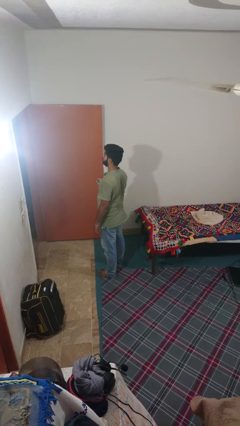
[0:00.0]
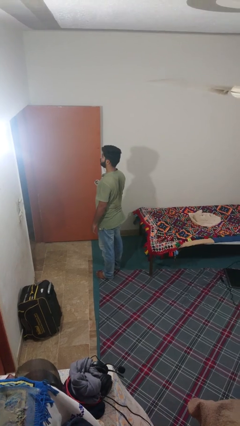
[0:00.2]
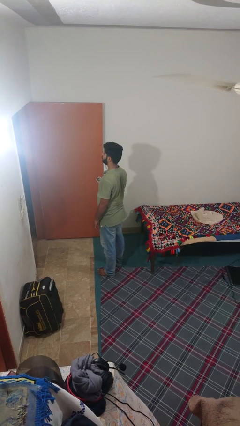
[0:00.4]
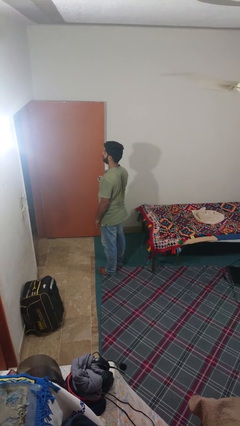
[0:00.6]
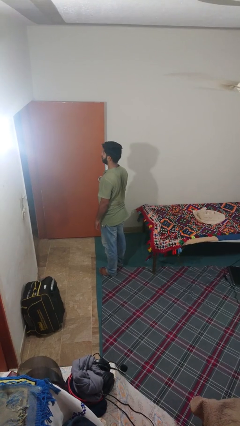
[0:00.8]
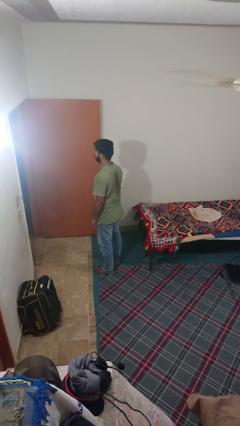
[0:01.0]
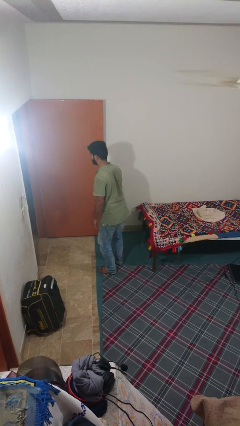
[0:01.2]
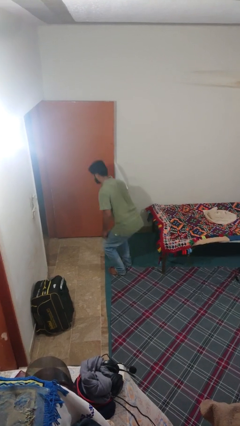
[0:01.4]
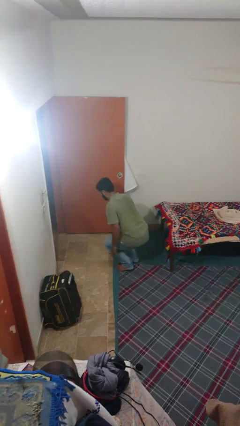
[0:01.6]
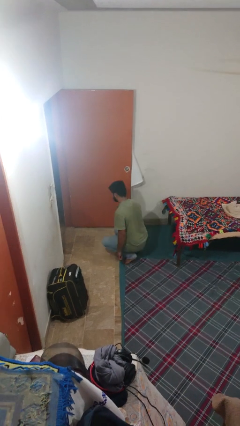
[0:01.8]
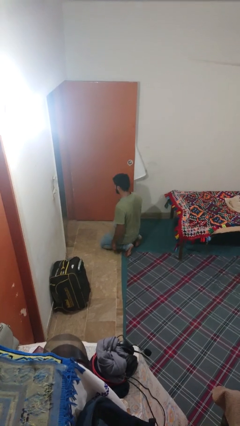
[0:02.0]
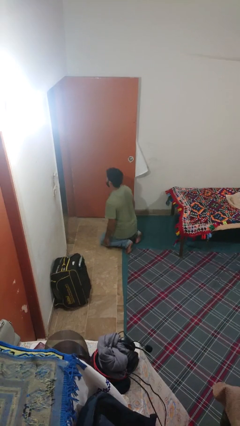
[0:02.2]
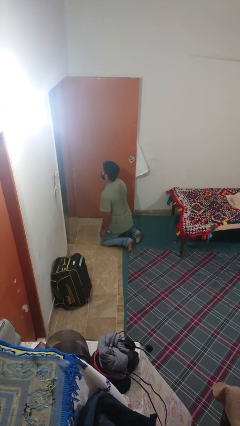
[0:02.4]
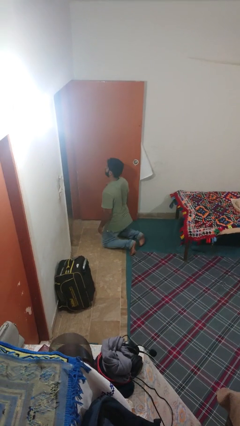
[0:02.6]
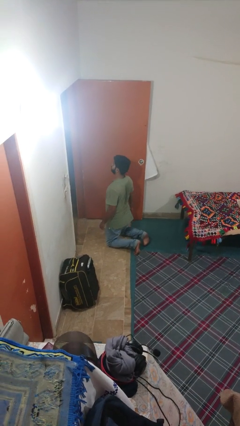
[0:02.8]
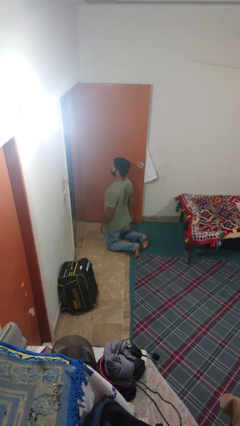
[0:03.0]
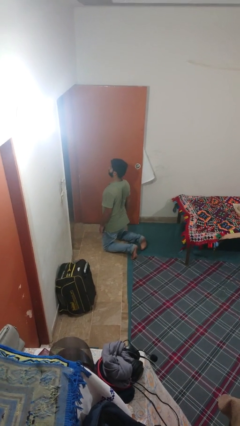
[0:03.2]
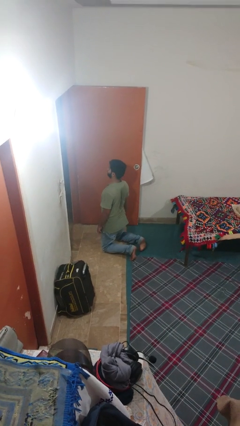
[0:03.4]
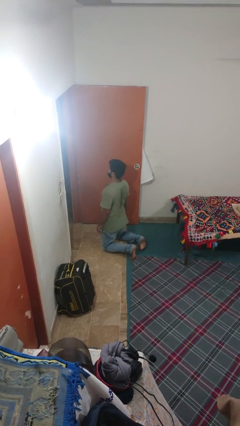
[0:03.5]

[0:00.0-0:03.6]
person kneels

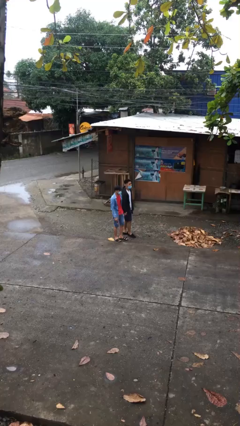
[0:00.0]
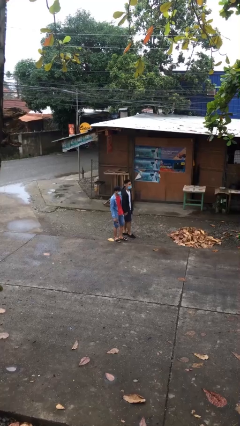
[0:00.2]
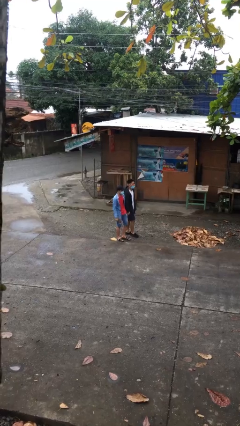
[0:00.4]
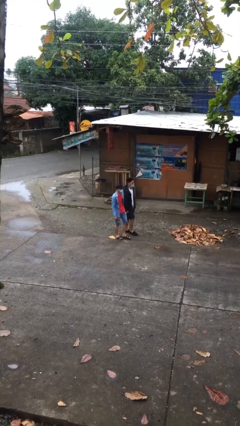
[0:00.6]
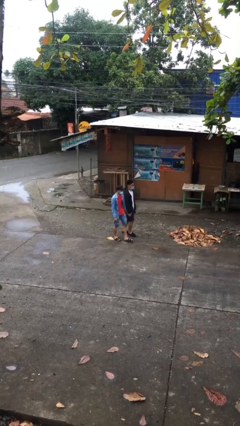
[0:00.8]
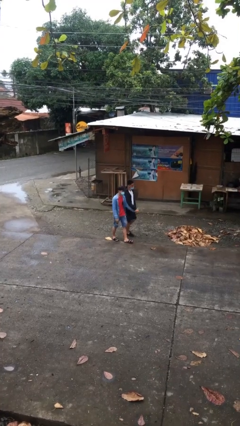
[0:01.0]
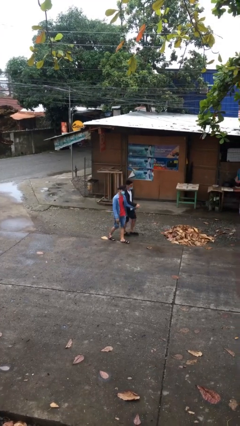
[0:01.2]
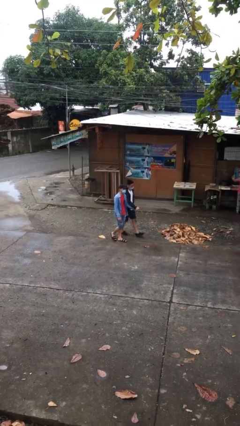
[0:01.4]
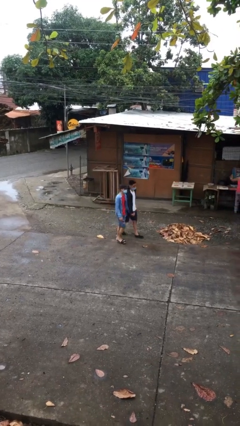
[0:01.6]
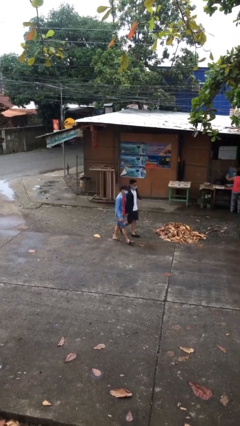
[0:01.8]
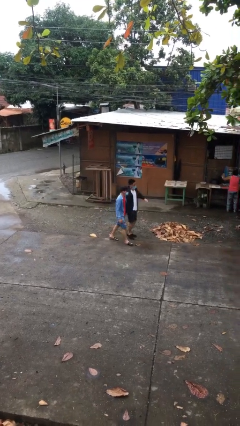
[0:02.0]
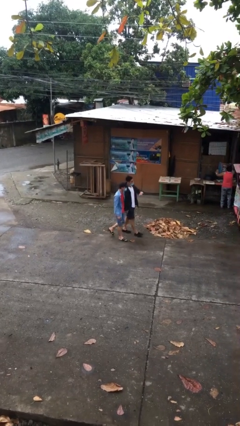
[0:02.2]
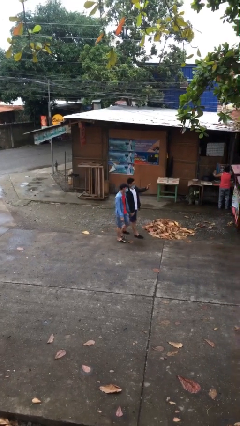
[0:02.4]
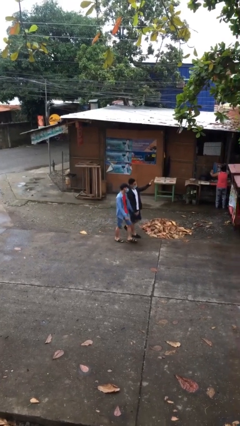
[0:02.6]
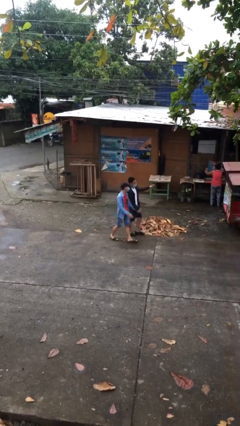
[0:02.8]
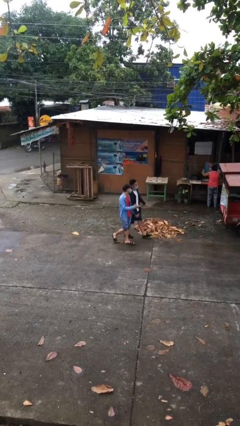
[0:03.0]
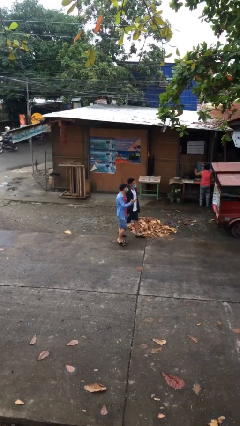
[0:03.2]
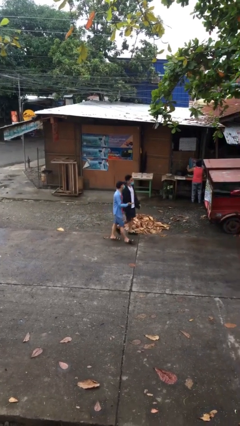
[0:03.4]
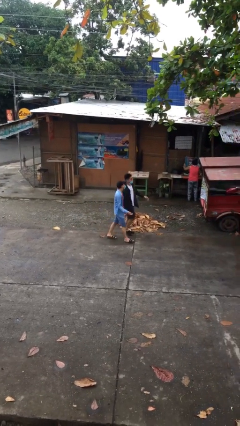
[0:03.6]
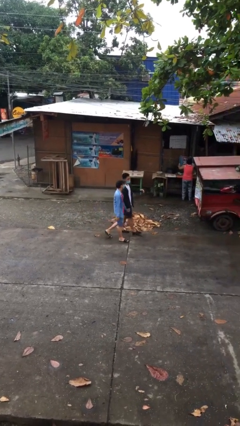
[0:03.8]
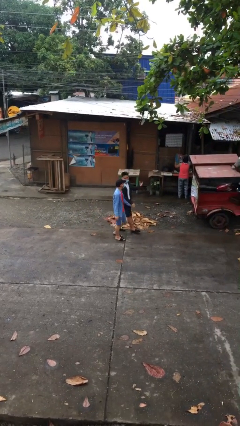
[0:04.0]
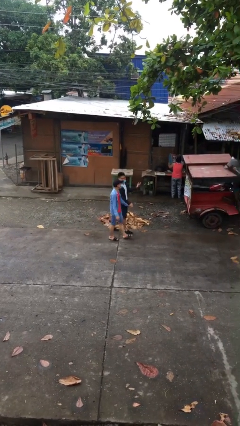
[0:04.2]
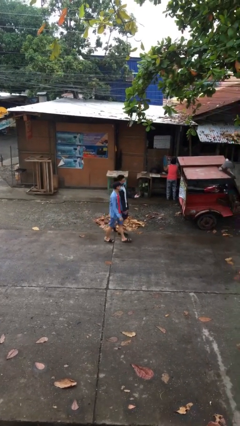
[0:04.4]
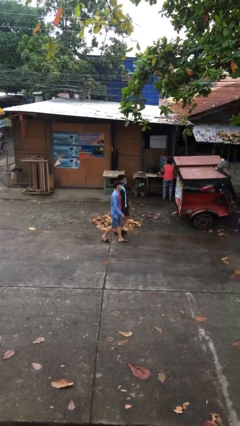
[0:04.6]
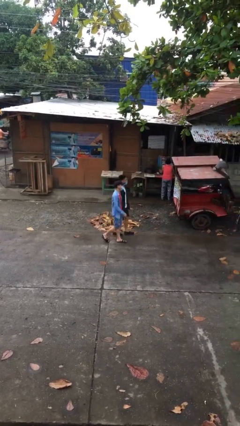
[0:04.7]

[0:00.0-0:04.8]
person holds hand

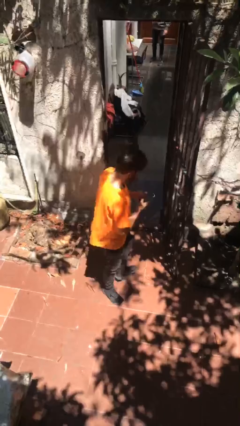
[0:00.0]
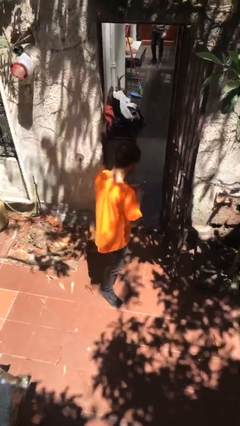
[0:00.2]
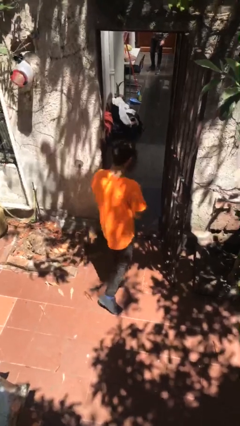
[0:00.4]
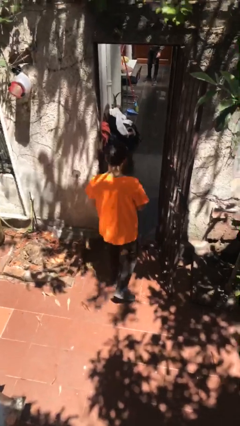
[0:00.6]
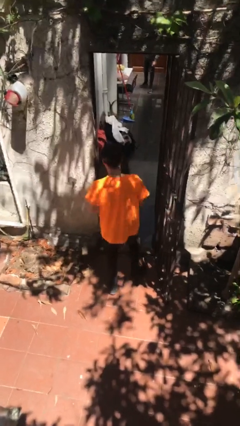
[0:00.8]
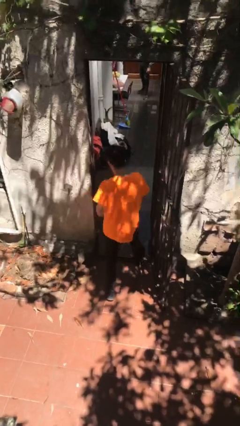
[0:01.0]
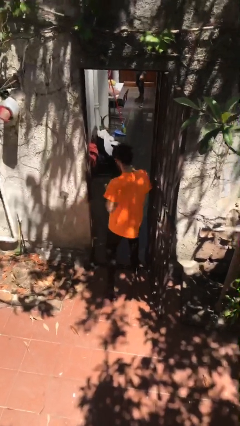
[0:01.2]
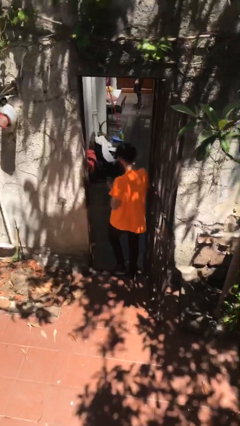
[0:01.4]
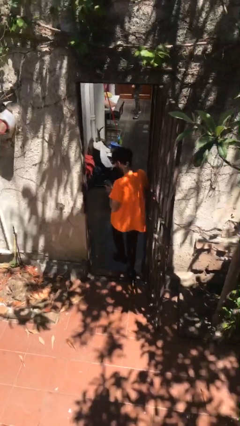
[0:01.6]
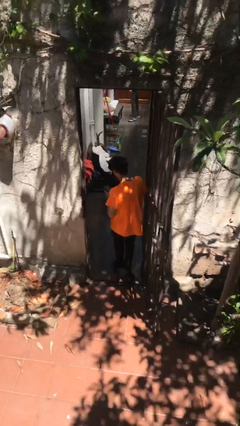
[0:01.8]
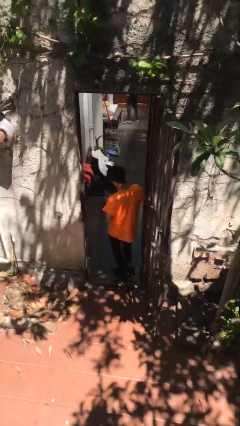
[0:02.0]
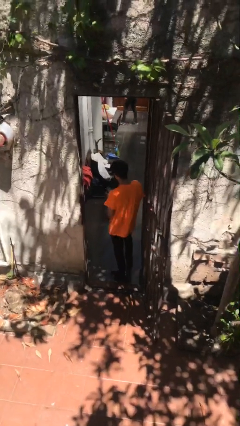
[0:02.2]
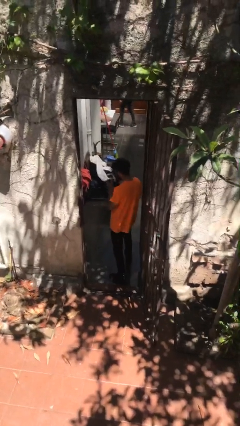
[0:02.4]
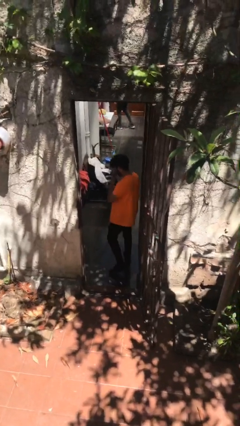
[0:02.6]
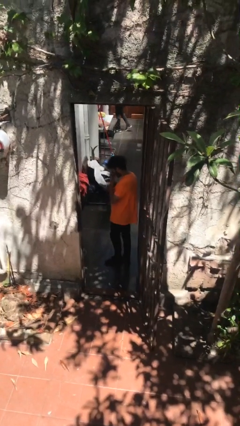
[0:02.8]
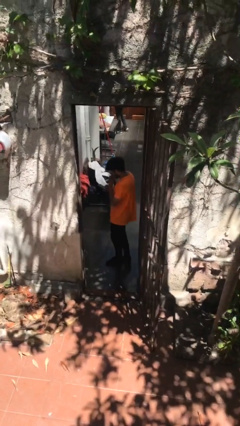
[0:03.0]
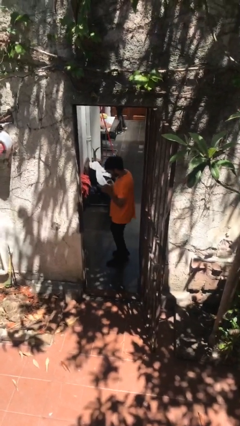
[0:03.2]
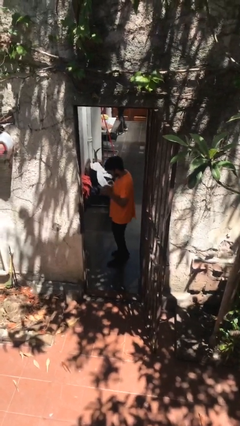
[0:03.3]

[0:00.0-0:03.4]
person exits scene through structure

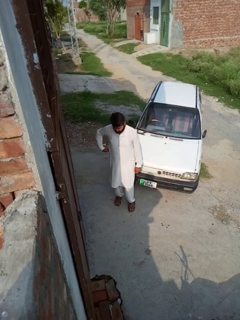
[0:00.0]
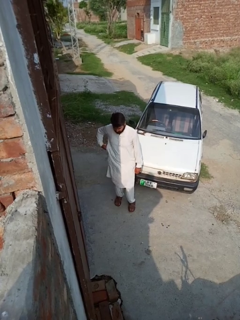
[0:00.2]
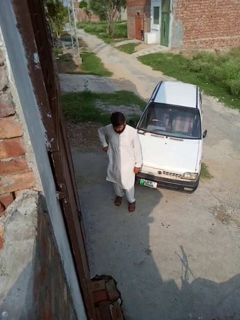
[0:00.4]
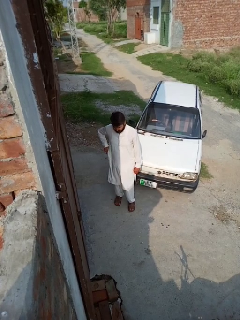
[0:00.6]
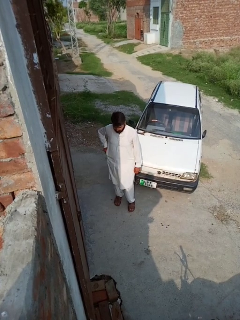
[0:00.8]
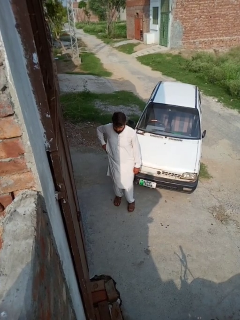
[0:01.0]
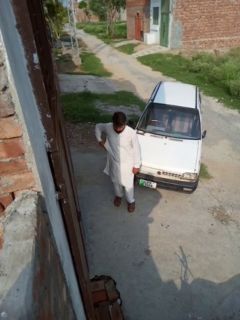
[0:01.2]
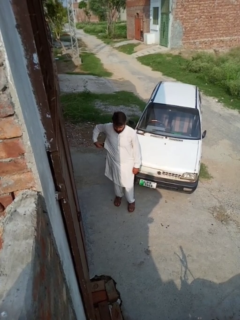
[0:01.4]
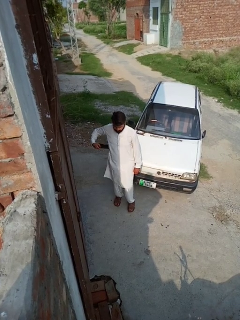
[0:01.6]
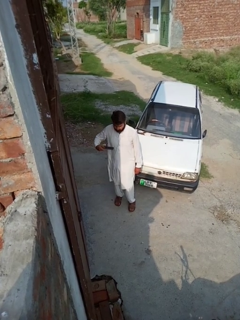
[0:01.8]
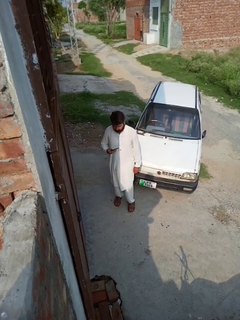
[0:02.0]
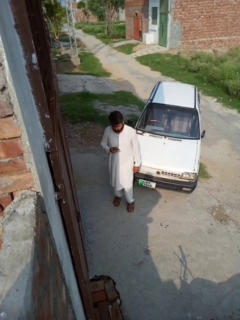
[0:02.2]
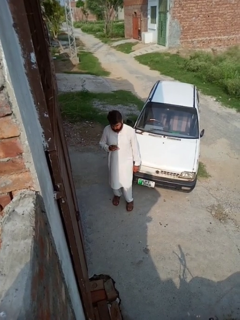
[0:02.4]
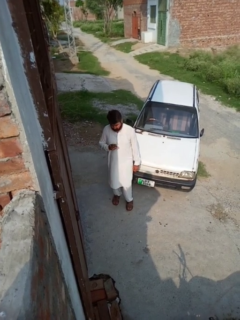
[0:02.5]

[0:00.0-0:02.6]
person takes phone from pocket

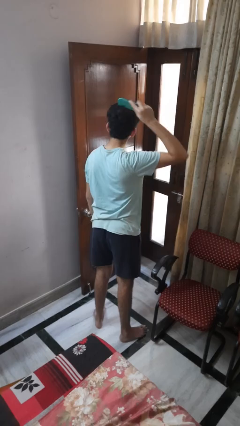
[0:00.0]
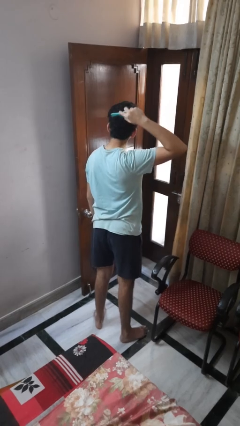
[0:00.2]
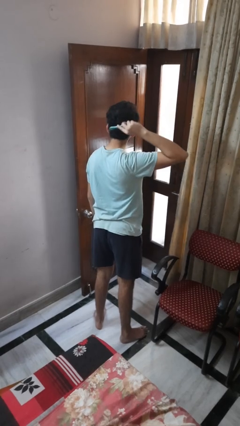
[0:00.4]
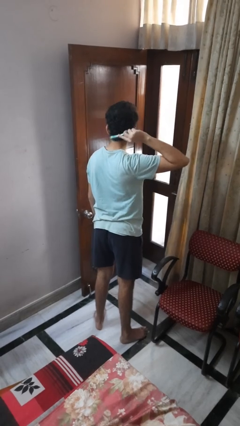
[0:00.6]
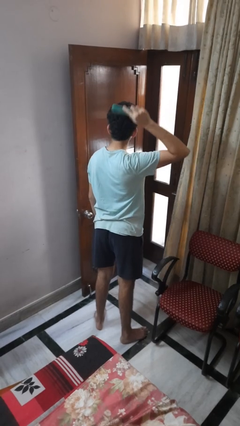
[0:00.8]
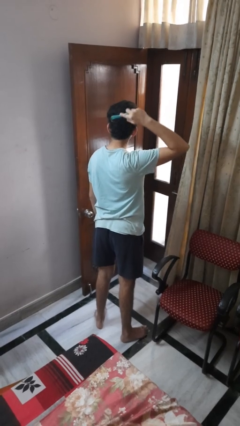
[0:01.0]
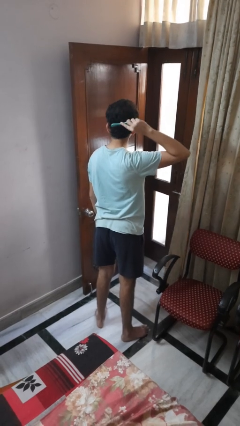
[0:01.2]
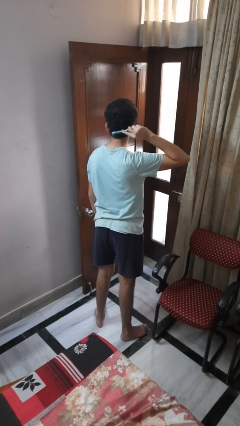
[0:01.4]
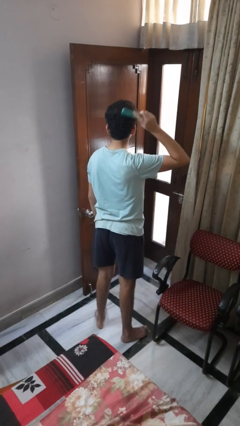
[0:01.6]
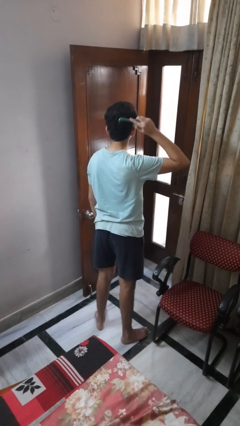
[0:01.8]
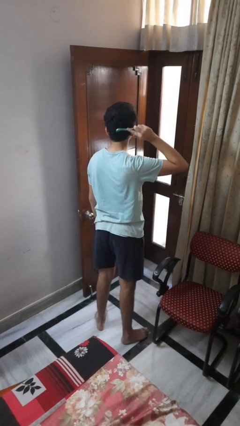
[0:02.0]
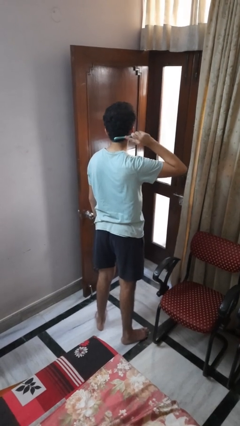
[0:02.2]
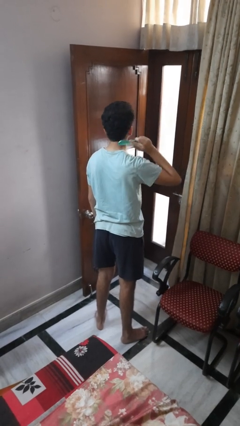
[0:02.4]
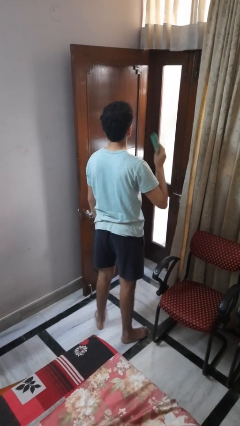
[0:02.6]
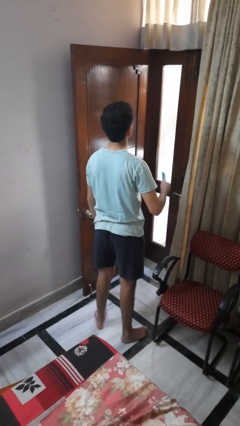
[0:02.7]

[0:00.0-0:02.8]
person brushes hair

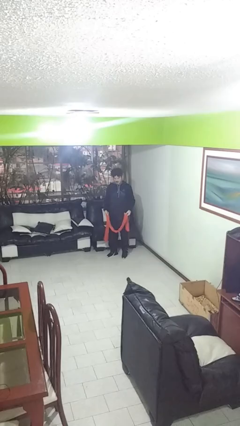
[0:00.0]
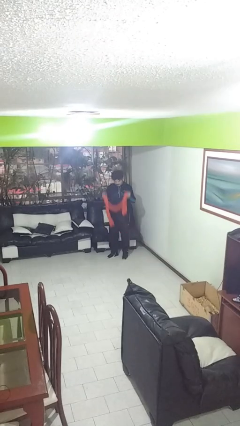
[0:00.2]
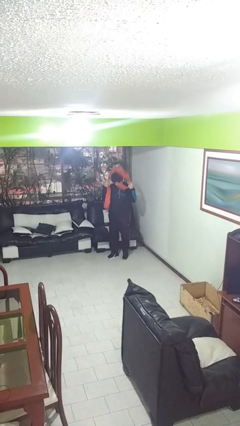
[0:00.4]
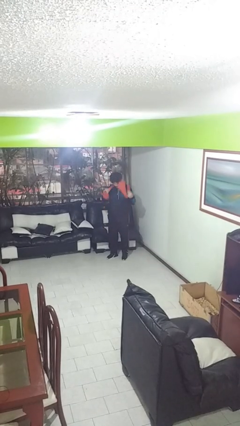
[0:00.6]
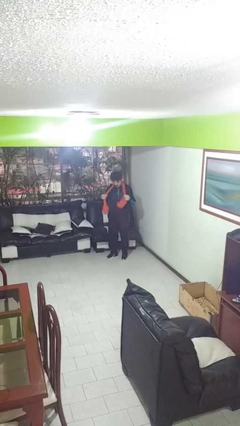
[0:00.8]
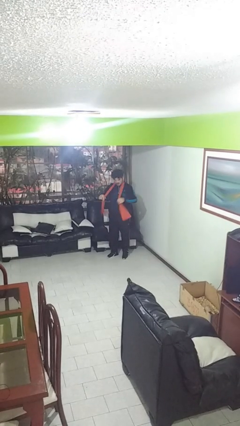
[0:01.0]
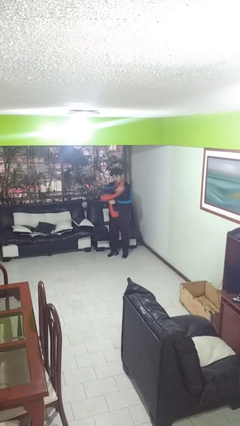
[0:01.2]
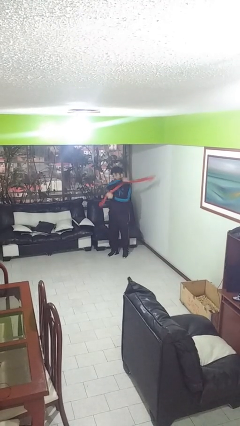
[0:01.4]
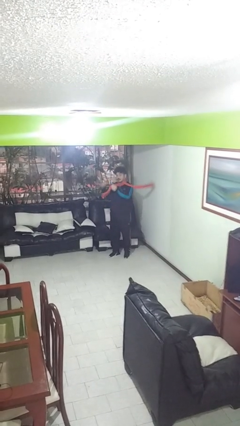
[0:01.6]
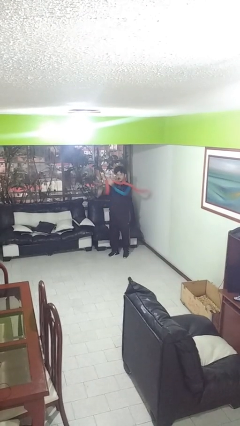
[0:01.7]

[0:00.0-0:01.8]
person puts on scarf
